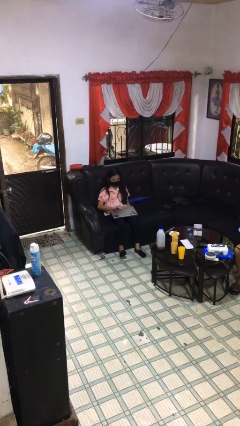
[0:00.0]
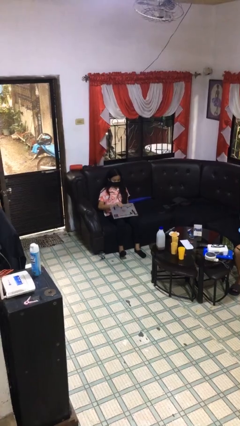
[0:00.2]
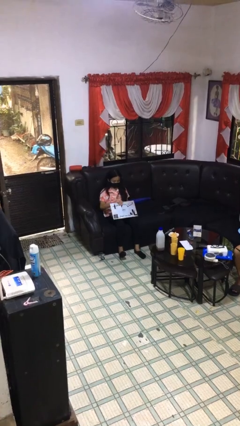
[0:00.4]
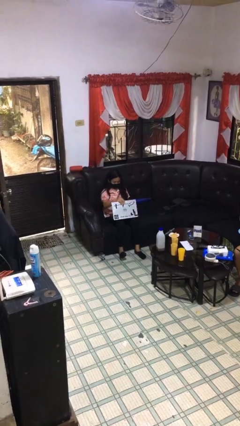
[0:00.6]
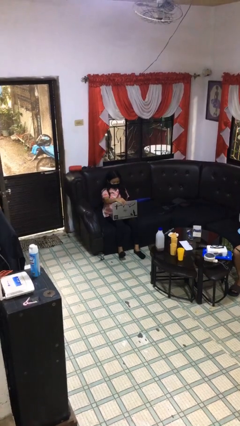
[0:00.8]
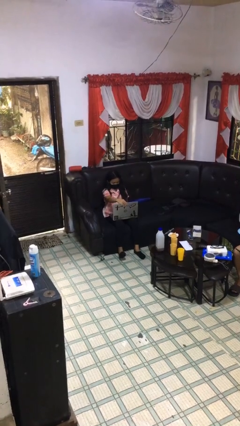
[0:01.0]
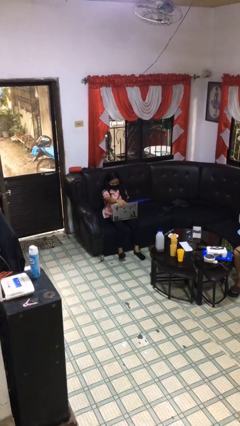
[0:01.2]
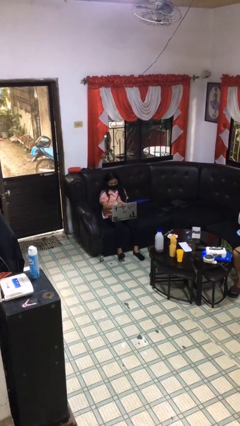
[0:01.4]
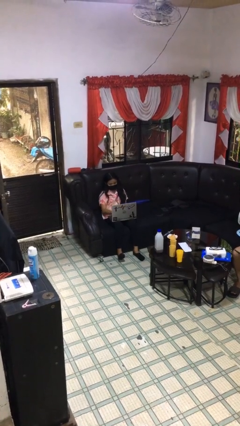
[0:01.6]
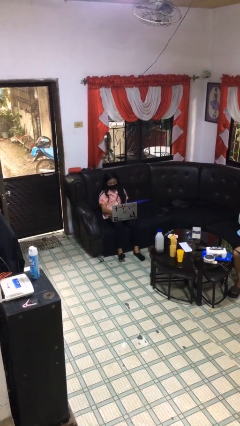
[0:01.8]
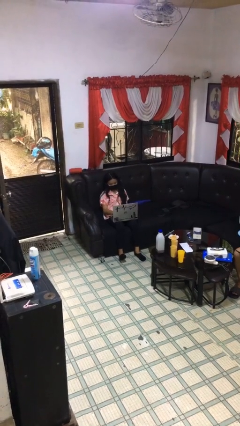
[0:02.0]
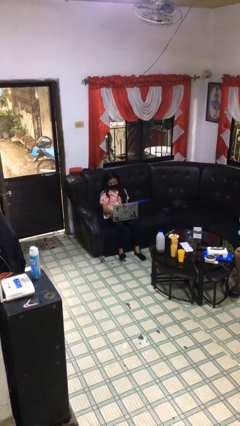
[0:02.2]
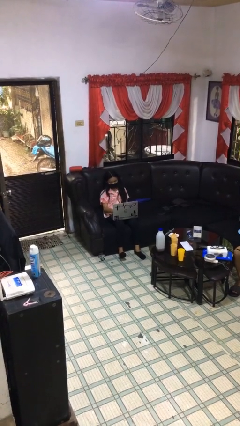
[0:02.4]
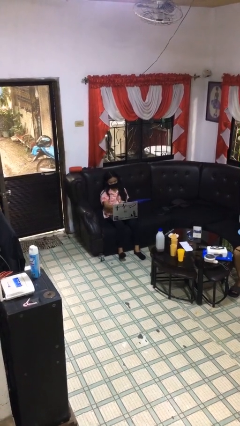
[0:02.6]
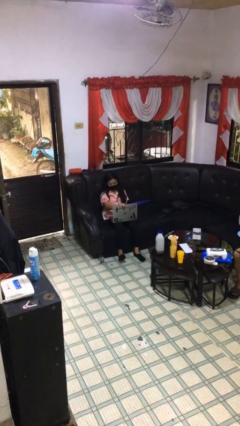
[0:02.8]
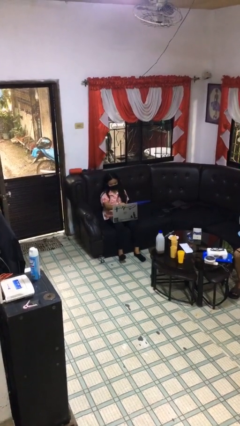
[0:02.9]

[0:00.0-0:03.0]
person interacts with laptop

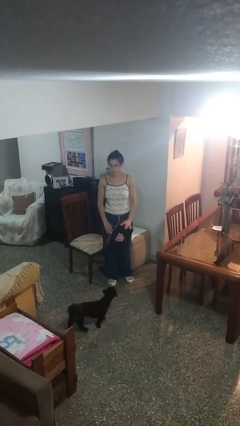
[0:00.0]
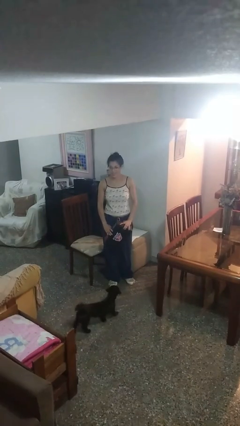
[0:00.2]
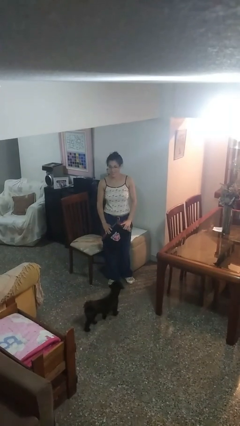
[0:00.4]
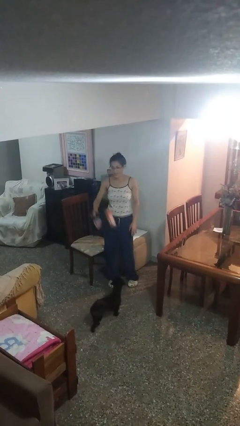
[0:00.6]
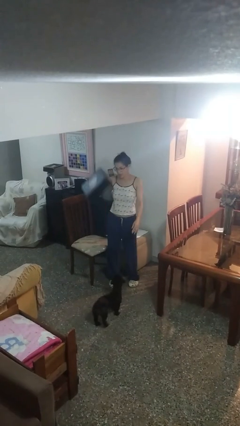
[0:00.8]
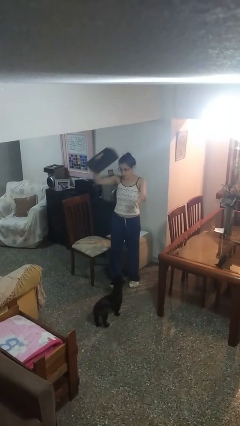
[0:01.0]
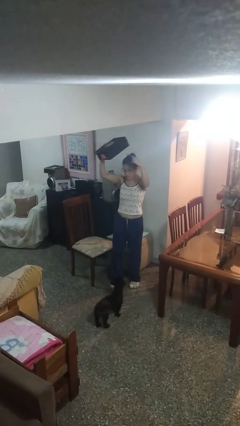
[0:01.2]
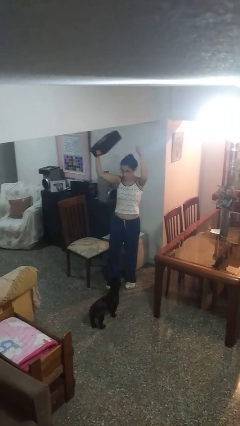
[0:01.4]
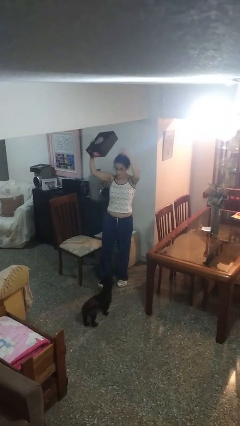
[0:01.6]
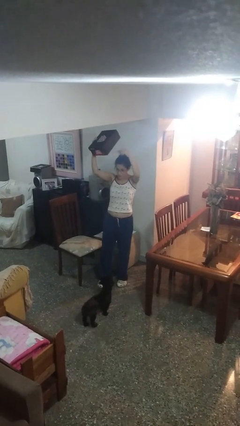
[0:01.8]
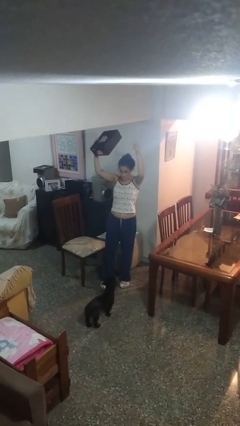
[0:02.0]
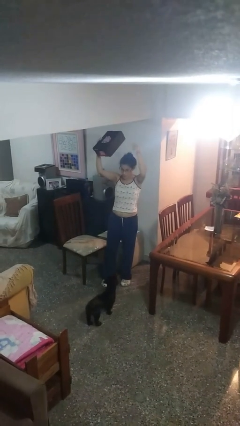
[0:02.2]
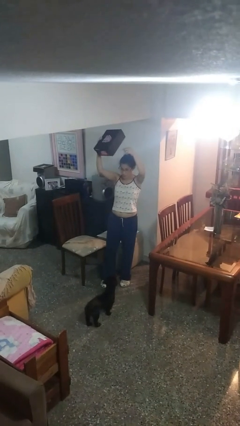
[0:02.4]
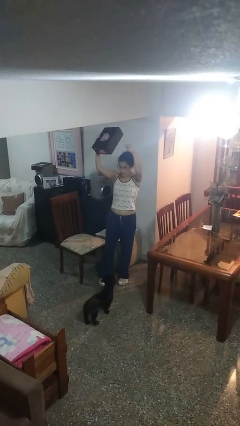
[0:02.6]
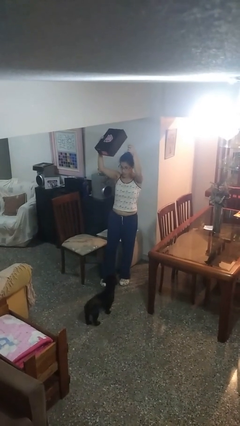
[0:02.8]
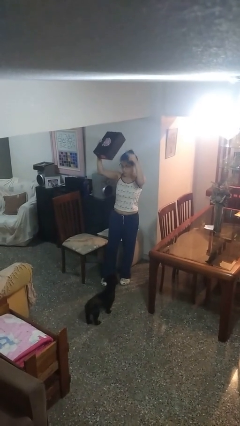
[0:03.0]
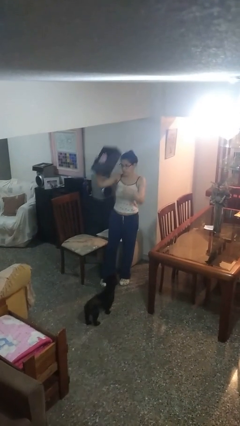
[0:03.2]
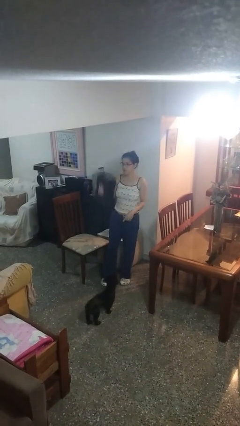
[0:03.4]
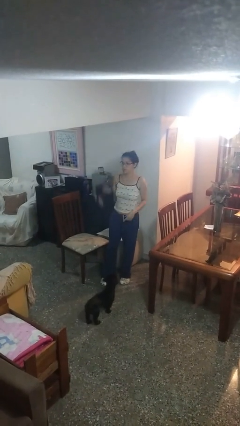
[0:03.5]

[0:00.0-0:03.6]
person holds object above head

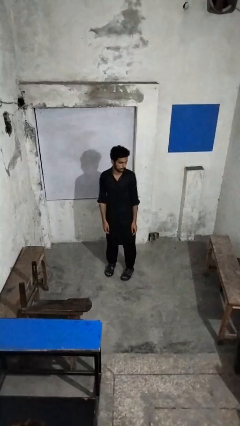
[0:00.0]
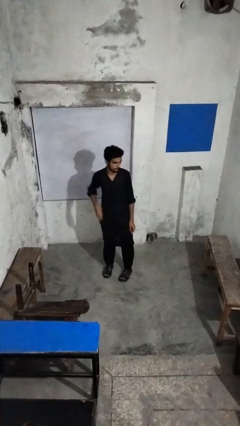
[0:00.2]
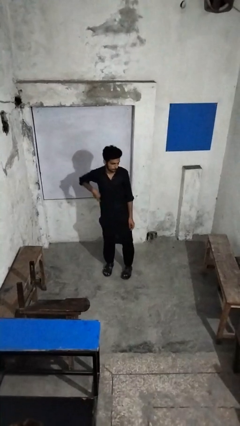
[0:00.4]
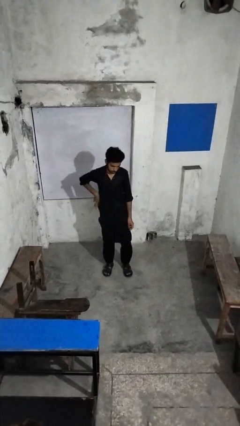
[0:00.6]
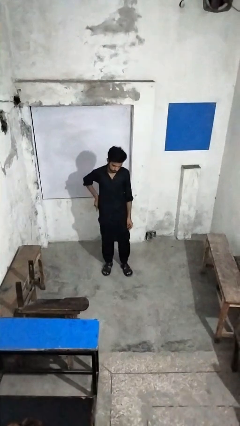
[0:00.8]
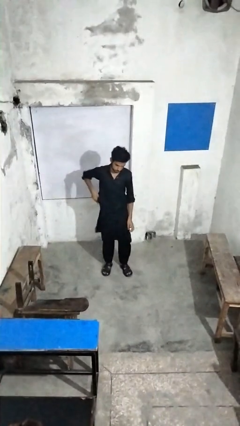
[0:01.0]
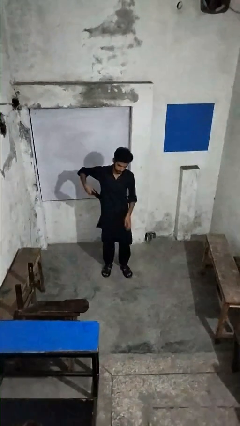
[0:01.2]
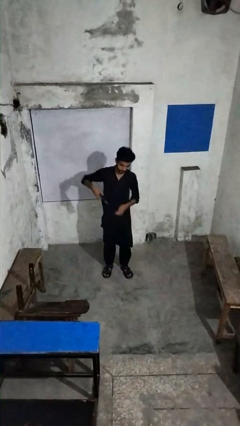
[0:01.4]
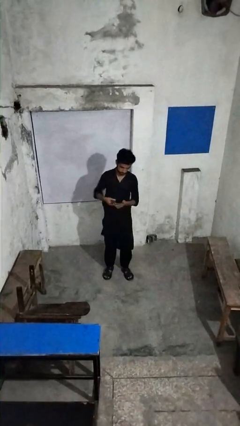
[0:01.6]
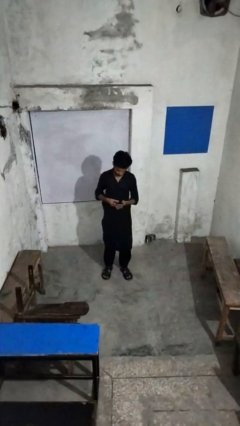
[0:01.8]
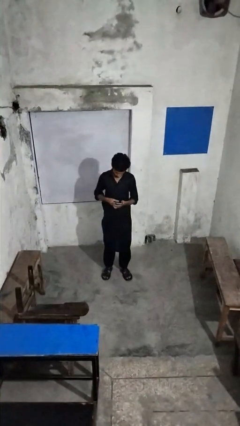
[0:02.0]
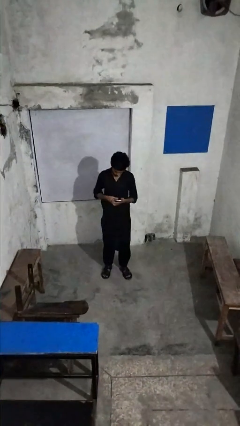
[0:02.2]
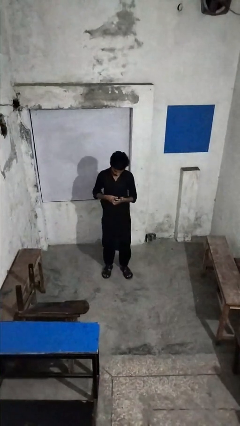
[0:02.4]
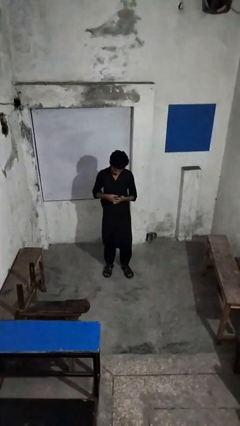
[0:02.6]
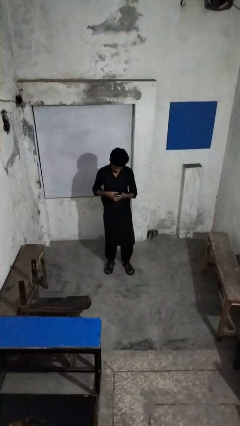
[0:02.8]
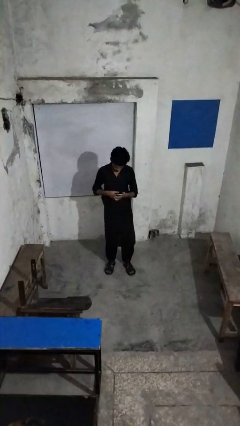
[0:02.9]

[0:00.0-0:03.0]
person takes phone from pocket

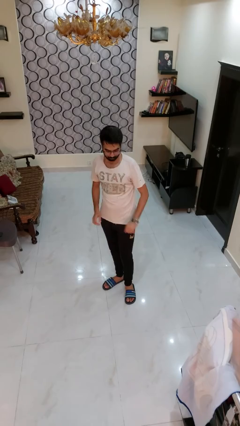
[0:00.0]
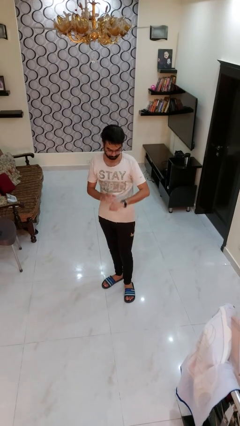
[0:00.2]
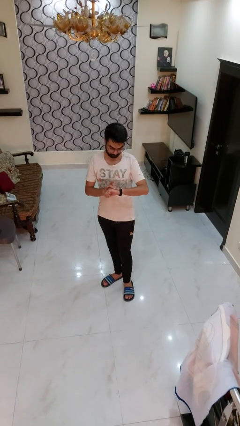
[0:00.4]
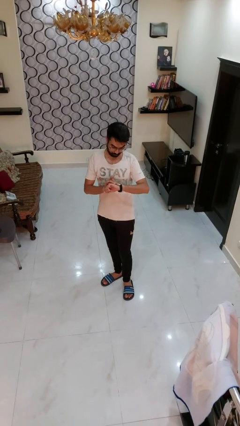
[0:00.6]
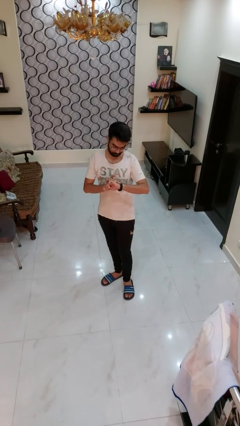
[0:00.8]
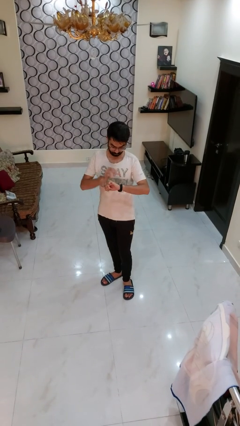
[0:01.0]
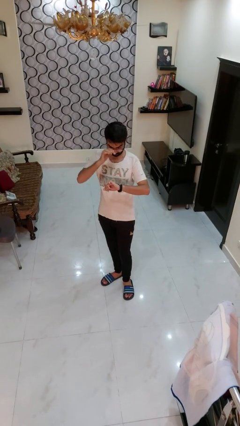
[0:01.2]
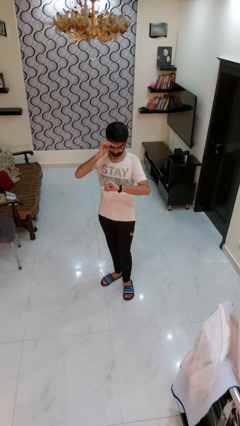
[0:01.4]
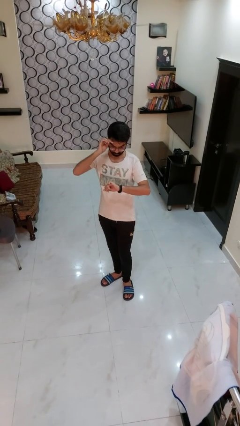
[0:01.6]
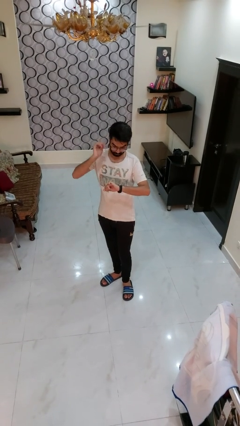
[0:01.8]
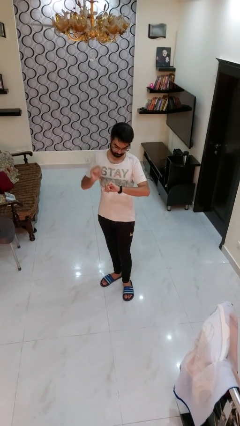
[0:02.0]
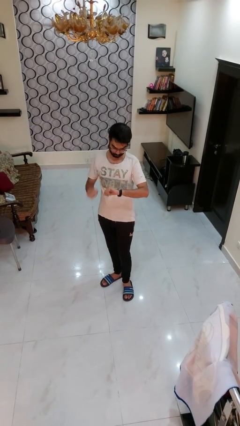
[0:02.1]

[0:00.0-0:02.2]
person looks at wristwatch

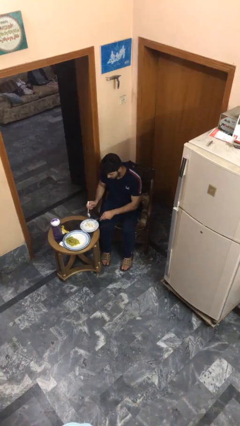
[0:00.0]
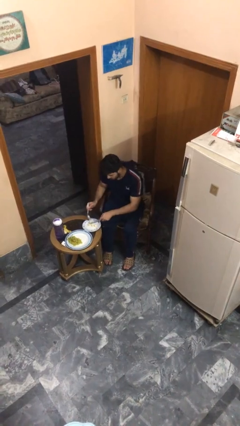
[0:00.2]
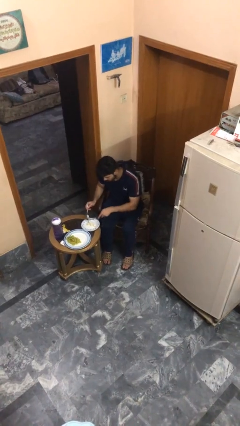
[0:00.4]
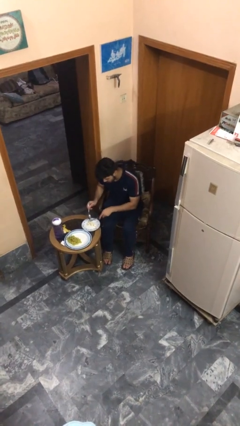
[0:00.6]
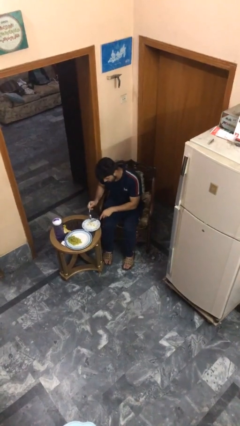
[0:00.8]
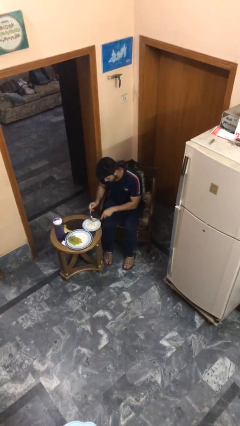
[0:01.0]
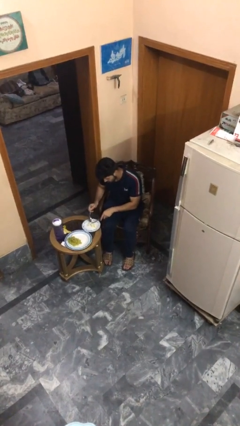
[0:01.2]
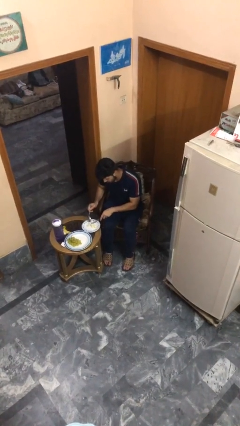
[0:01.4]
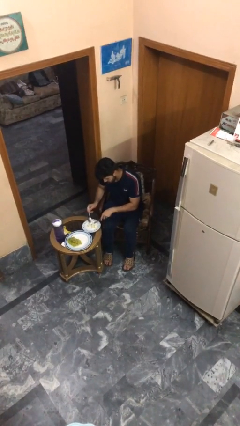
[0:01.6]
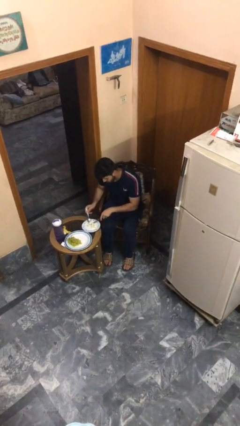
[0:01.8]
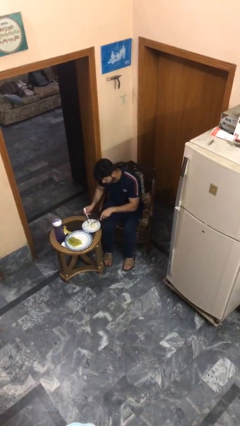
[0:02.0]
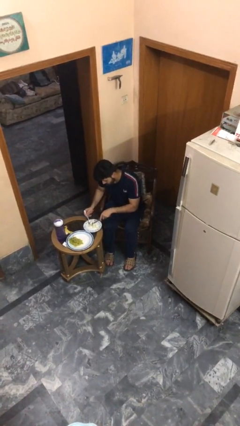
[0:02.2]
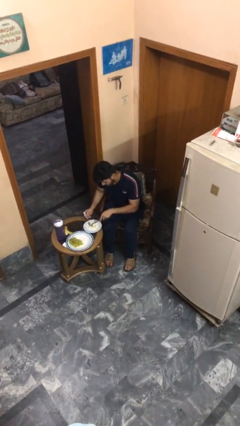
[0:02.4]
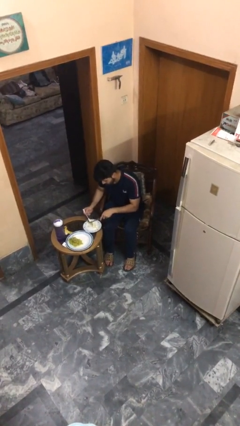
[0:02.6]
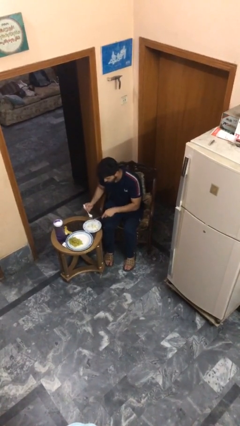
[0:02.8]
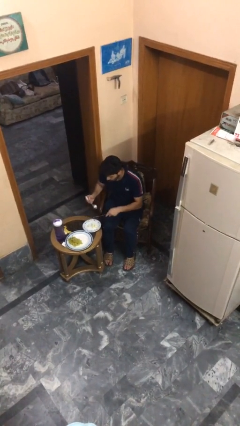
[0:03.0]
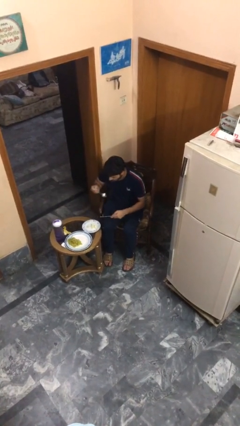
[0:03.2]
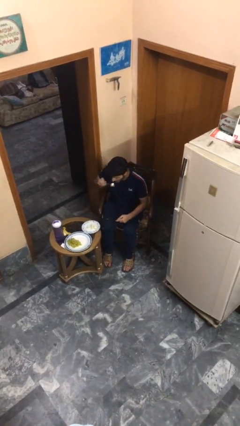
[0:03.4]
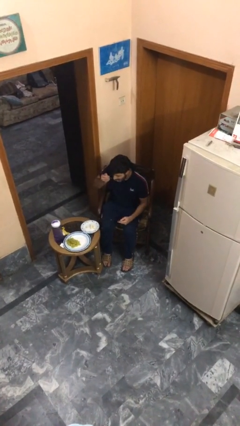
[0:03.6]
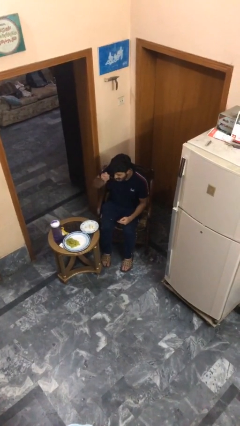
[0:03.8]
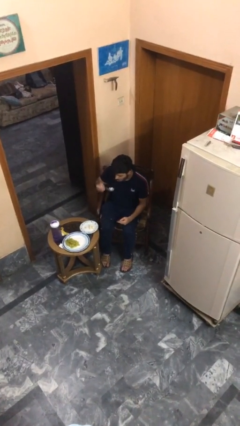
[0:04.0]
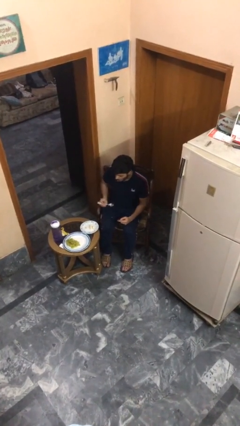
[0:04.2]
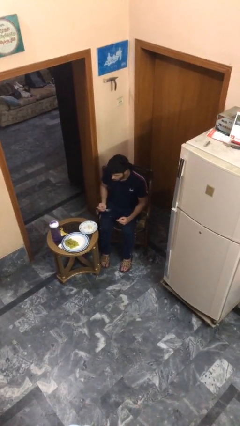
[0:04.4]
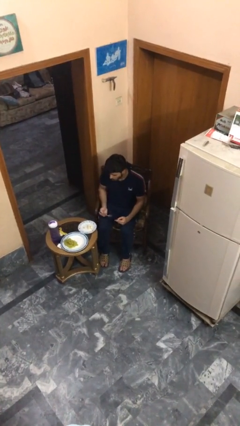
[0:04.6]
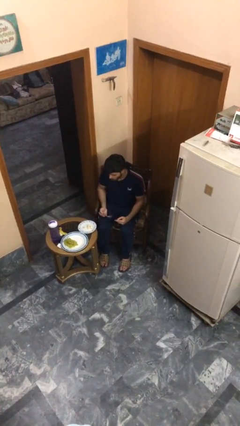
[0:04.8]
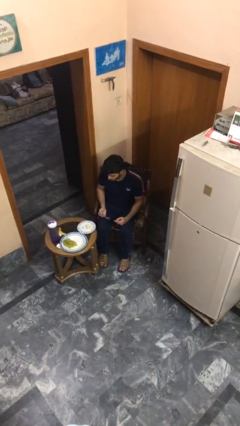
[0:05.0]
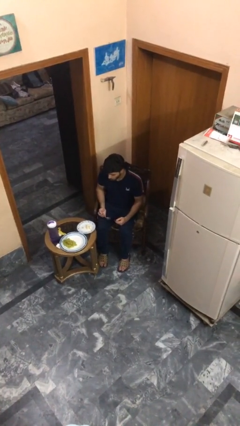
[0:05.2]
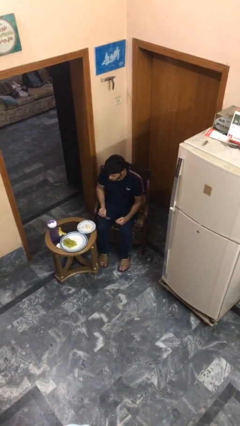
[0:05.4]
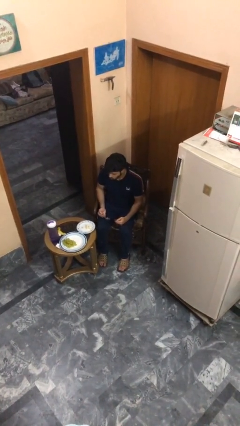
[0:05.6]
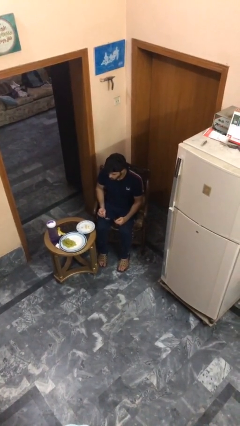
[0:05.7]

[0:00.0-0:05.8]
person eats with utensil

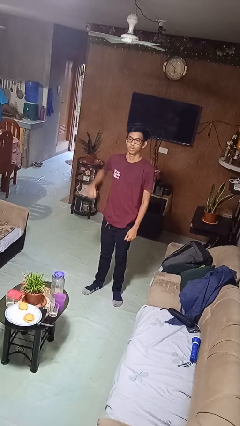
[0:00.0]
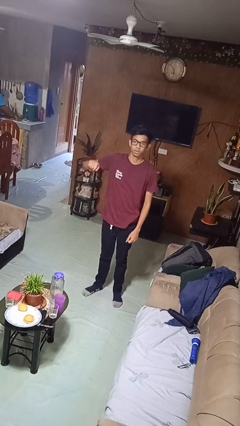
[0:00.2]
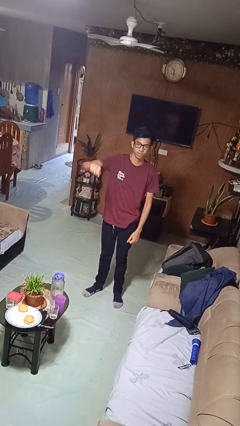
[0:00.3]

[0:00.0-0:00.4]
person punches
